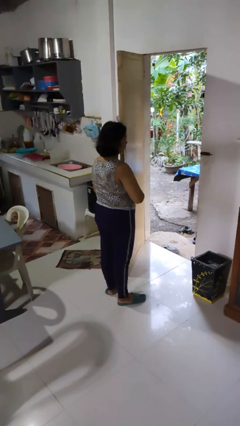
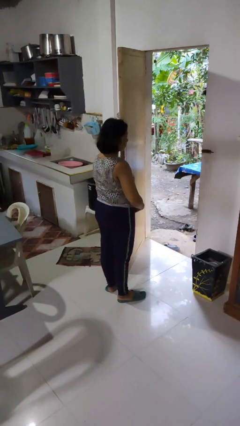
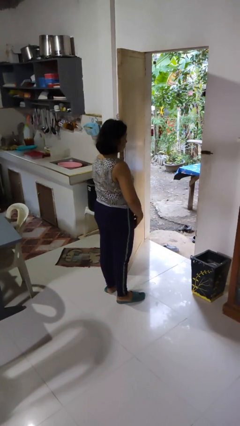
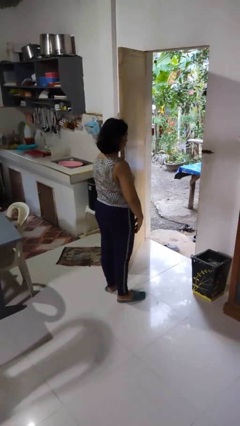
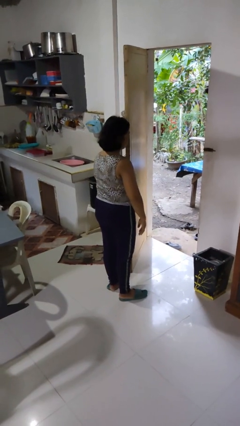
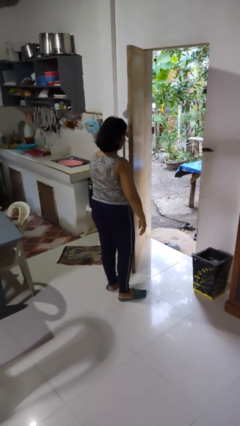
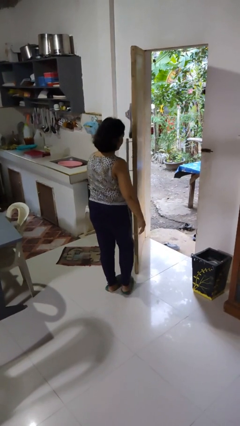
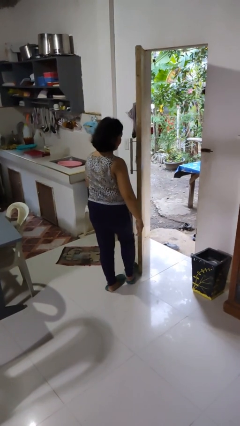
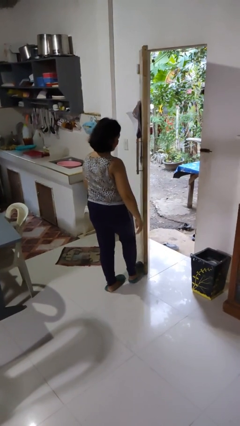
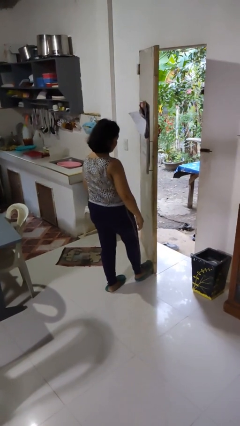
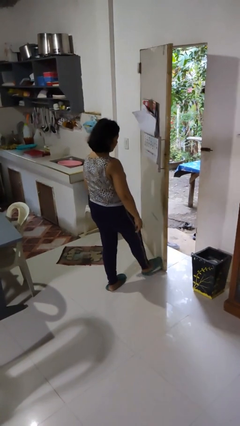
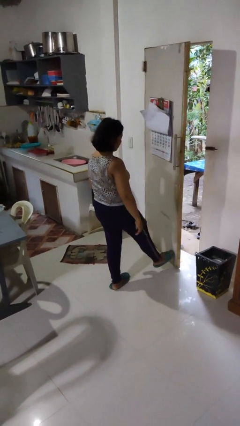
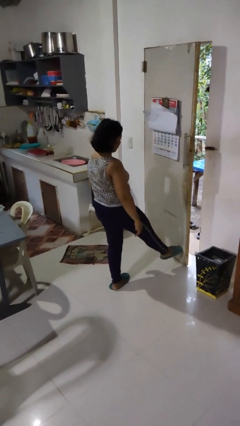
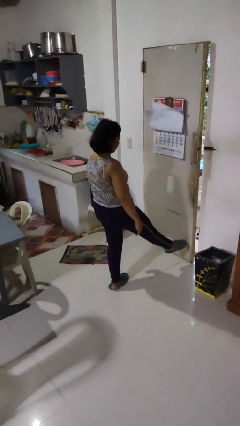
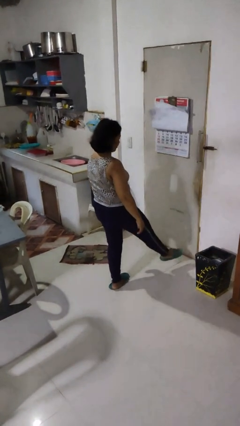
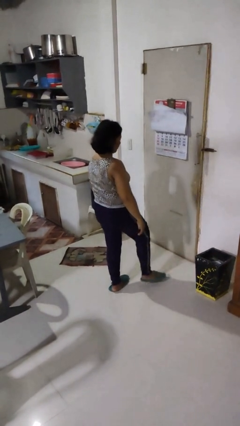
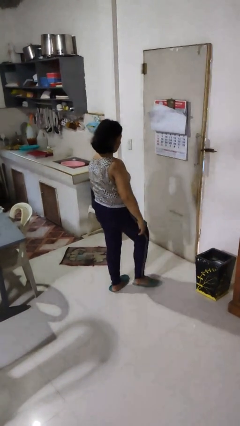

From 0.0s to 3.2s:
person closes door with foot

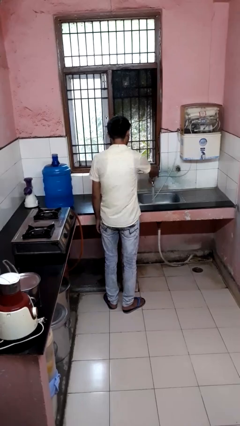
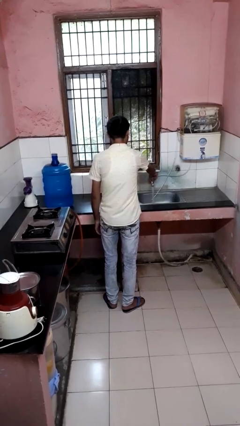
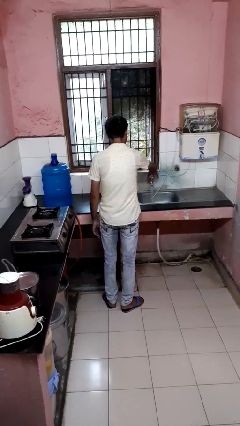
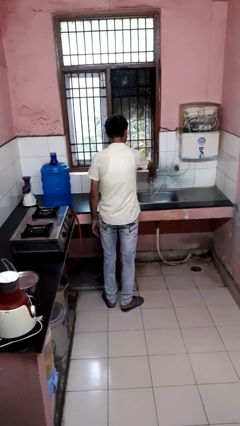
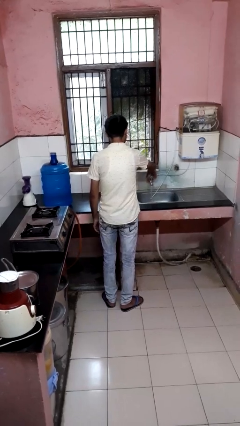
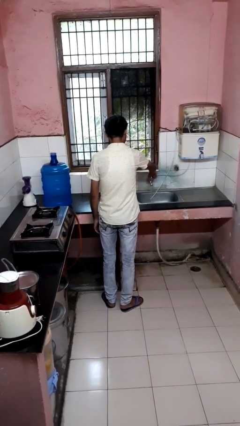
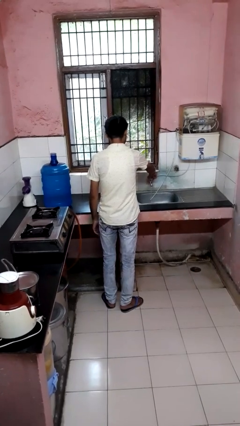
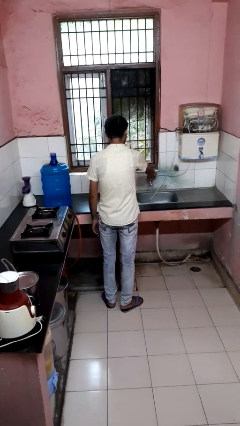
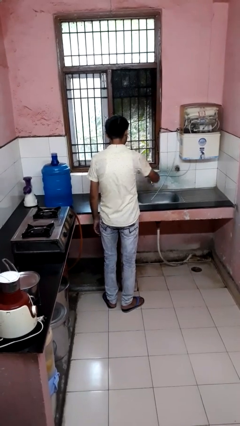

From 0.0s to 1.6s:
person turns off faucet

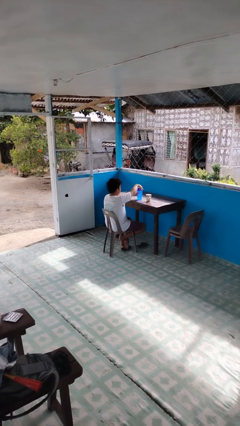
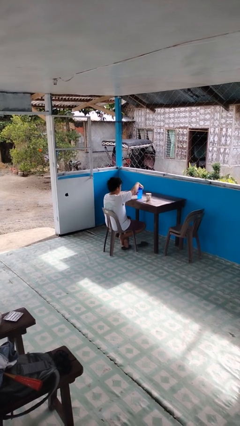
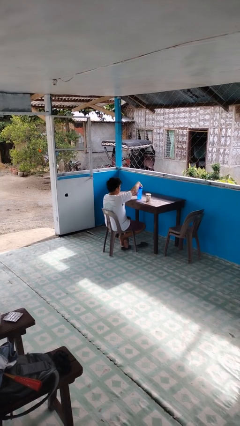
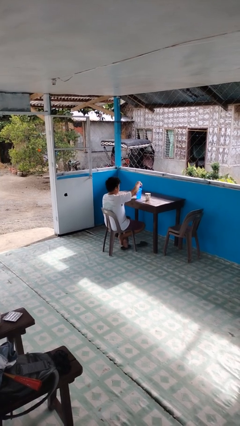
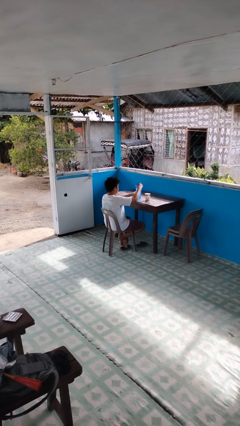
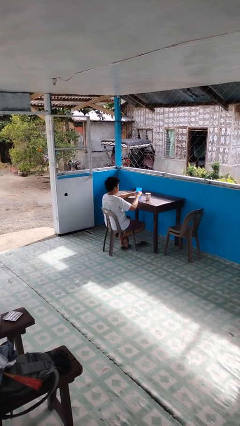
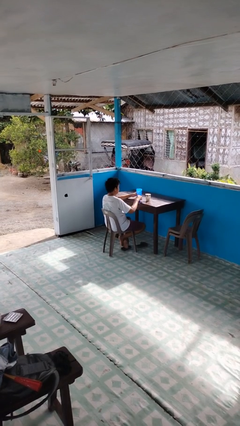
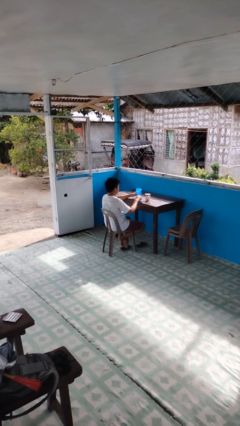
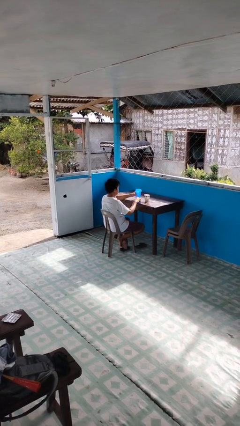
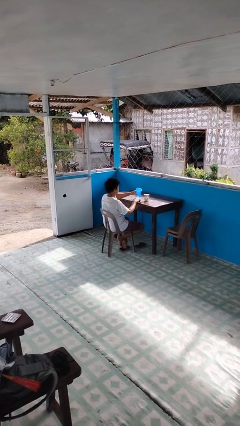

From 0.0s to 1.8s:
person unscrews lid from bottle

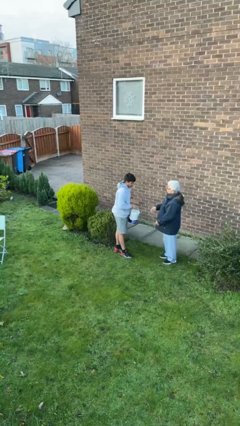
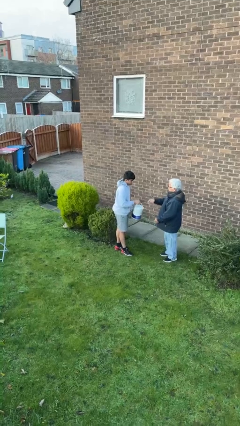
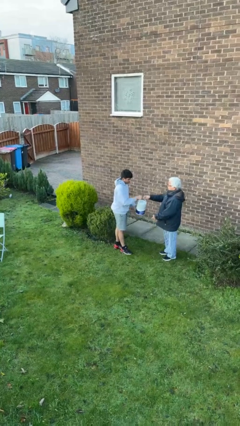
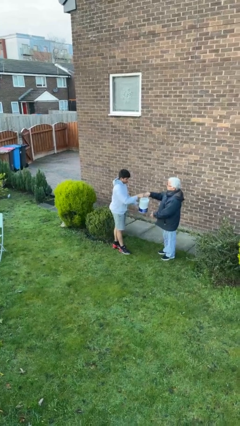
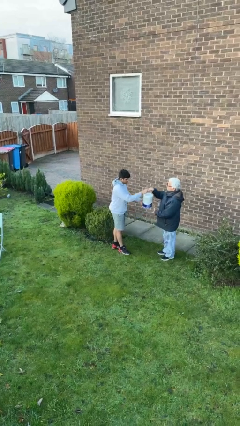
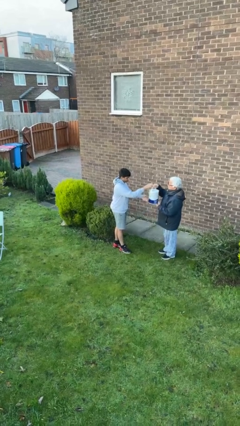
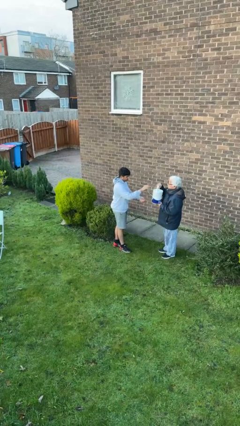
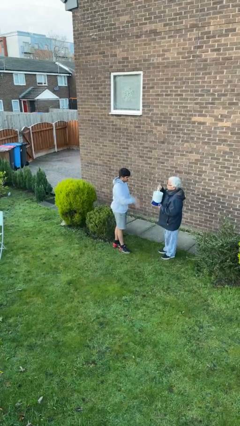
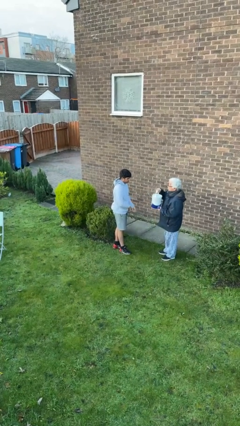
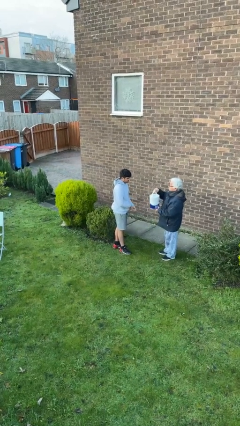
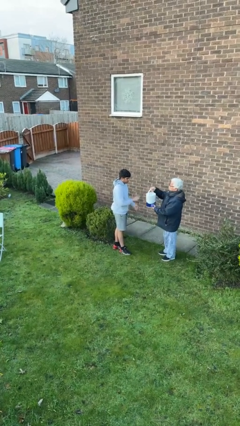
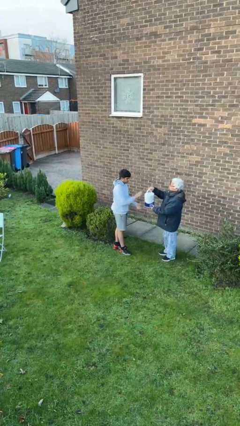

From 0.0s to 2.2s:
person transfers object to person

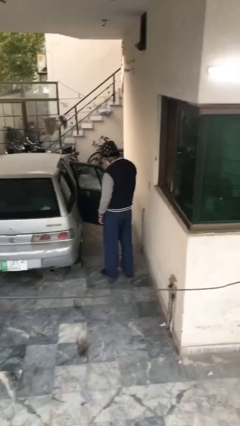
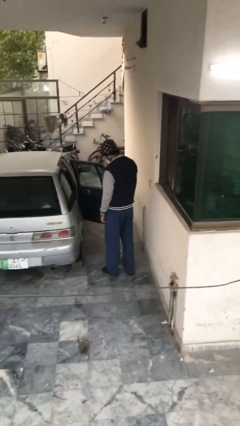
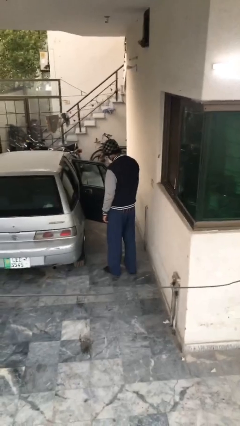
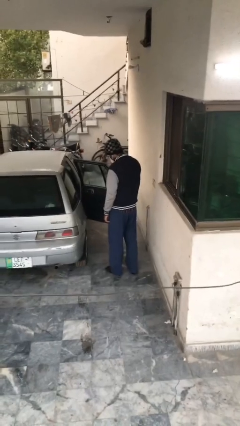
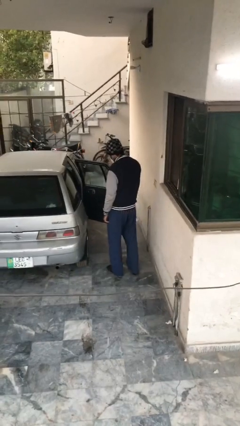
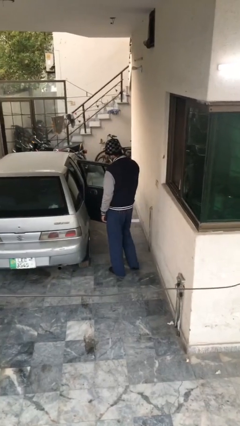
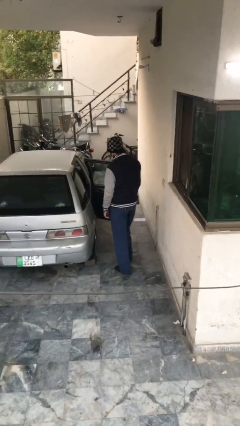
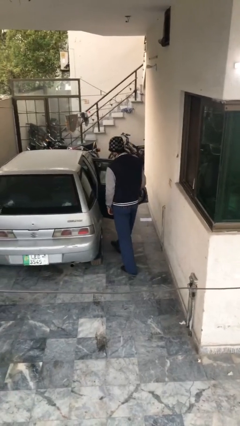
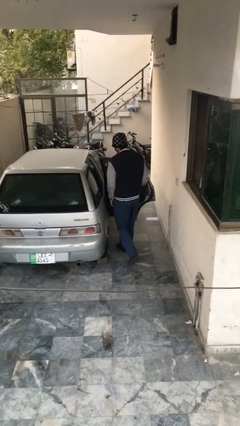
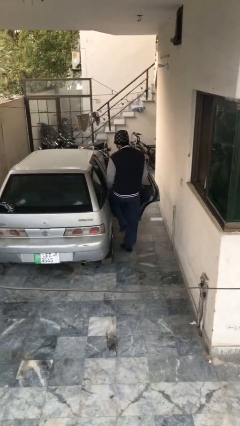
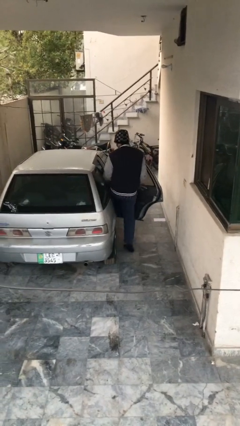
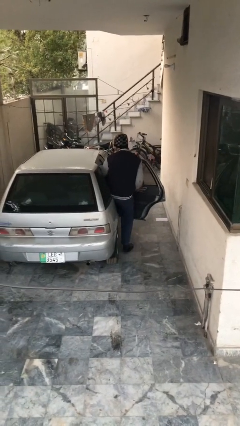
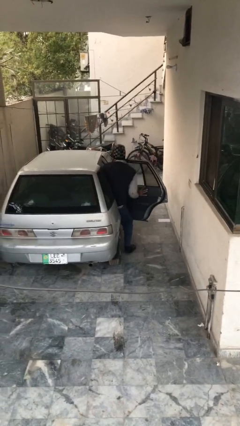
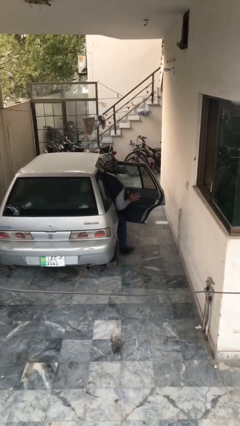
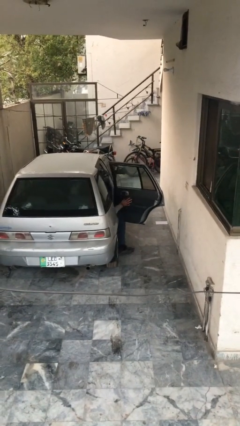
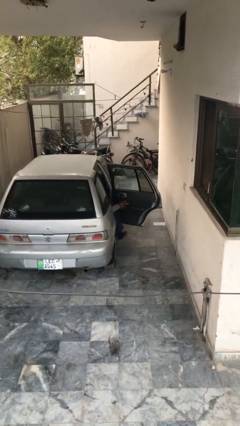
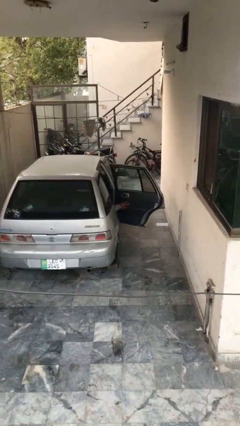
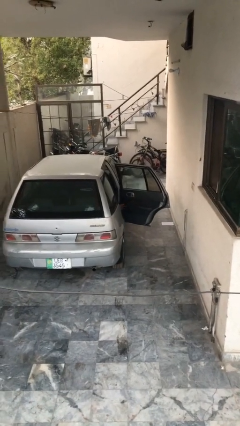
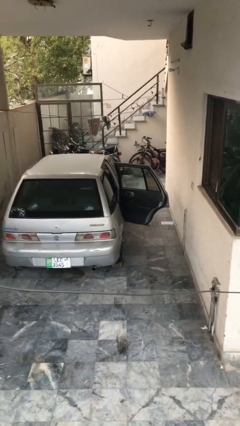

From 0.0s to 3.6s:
person enters car

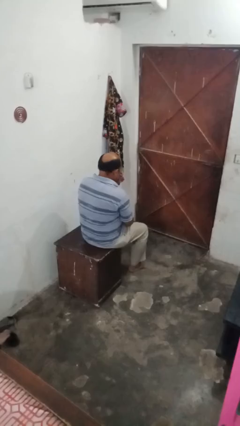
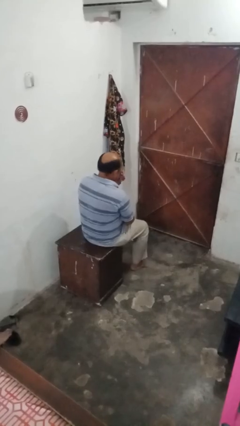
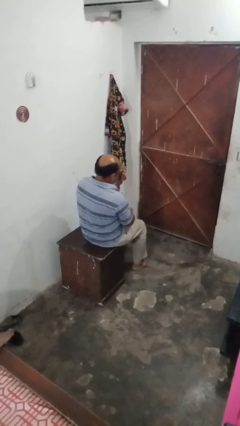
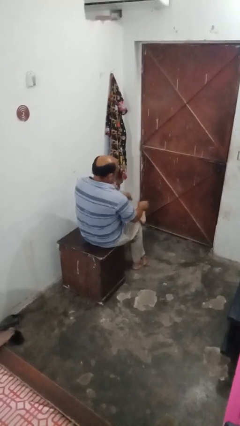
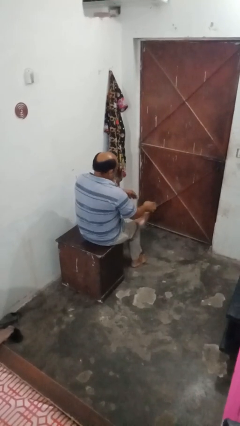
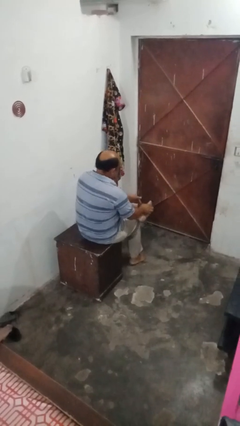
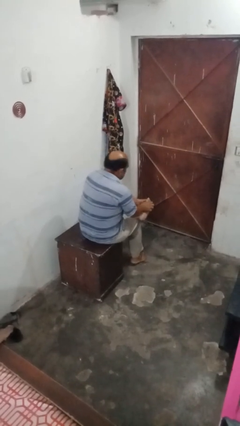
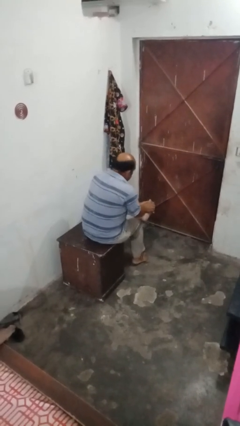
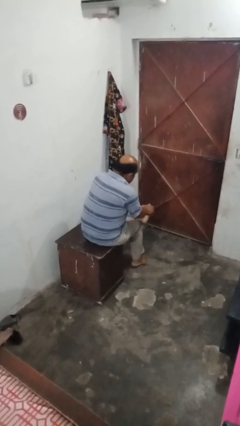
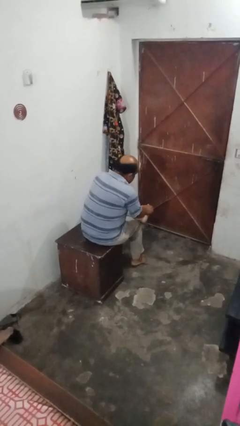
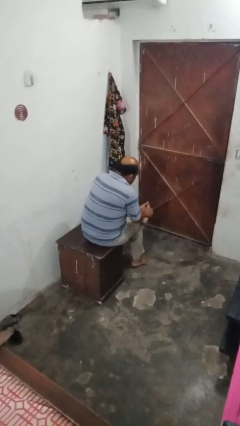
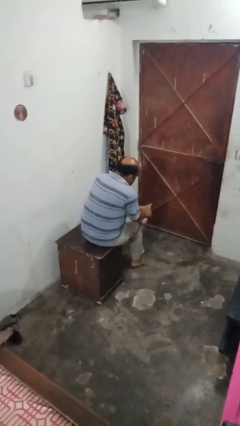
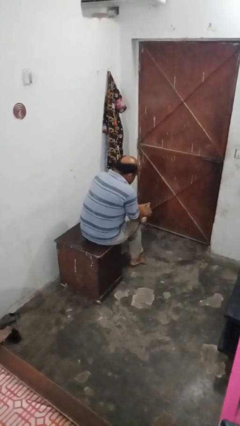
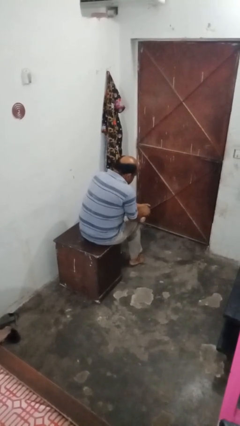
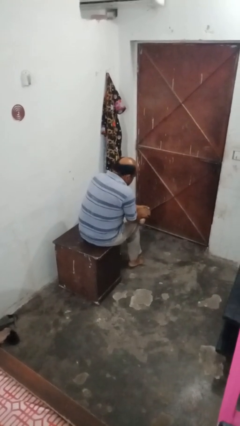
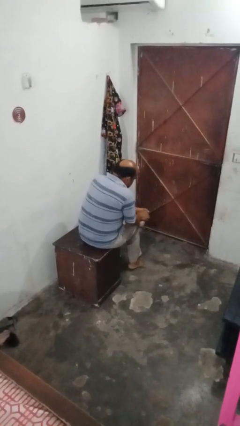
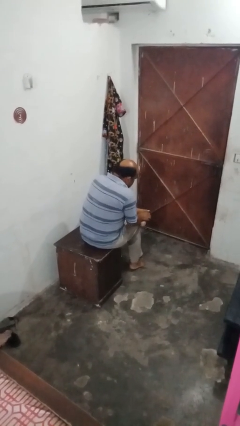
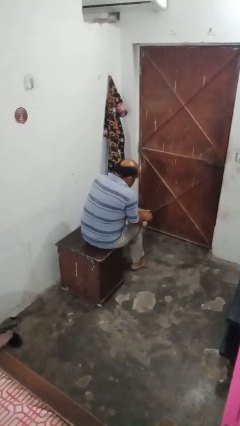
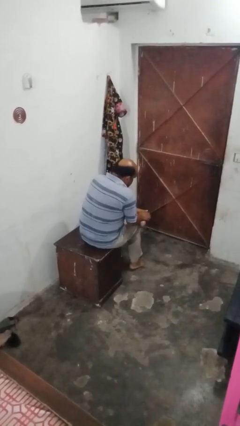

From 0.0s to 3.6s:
person rubs foot

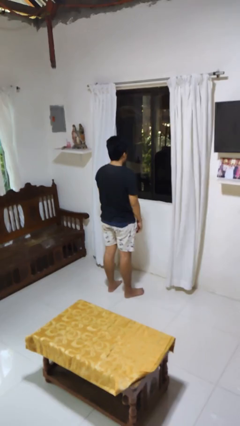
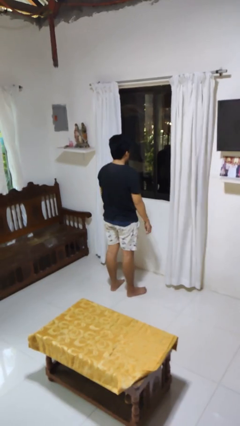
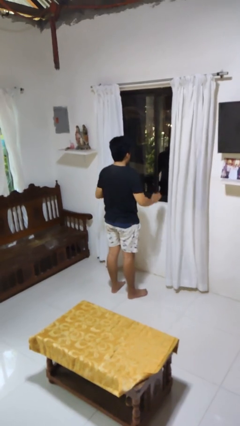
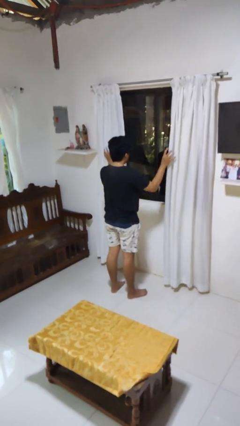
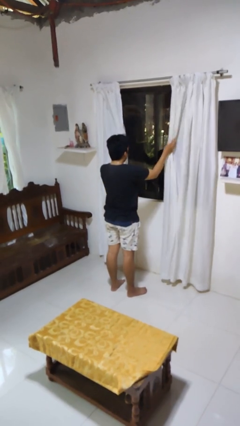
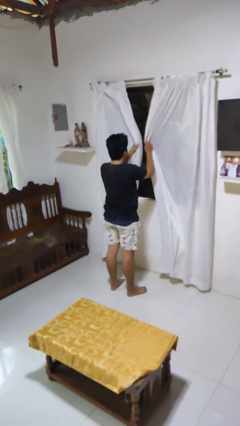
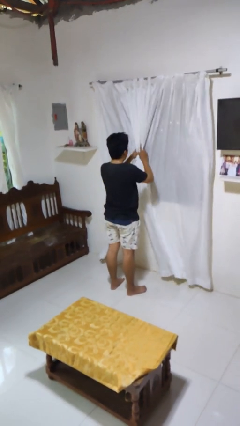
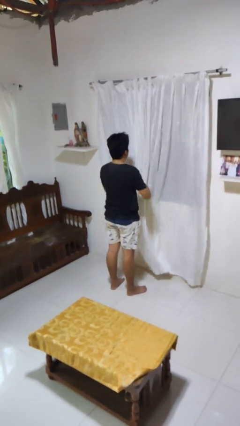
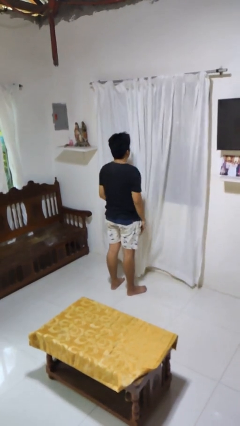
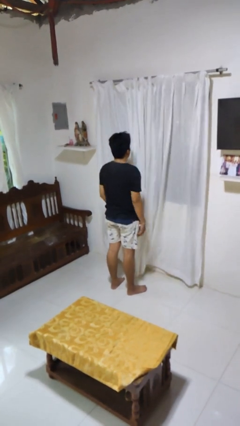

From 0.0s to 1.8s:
person closes curtains
